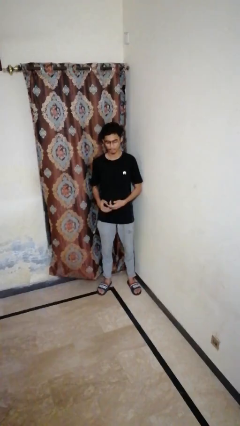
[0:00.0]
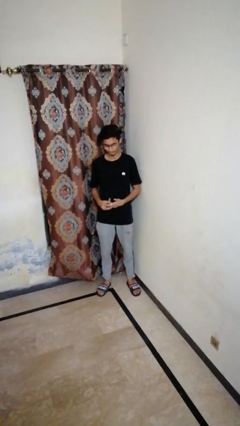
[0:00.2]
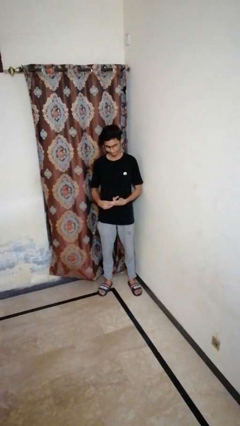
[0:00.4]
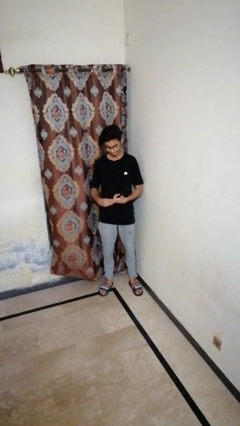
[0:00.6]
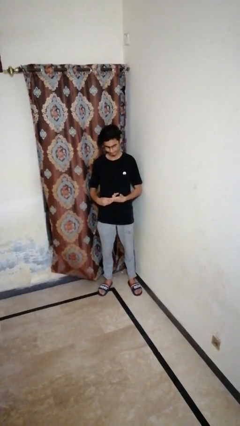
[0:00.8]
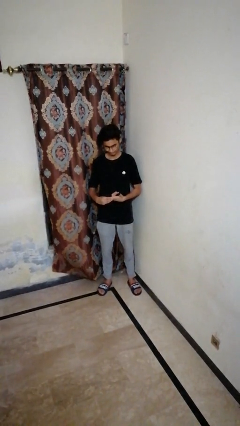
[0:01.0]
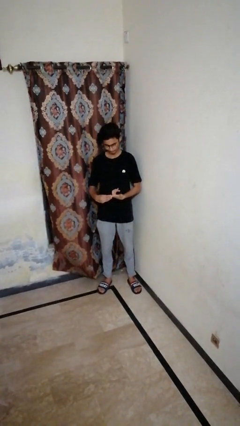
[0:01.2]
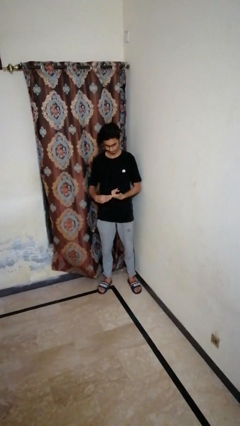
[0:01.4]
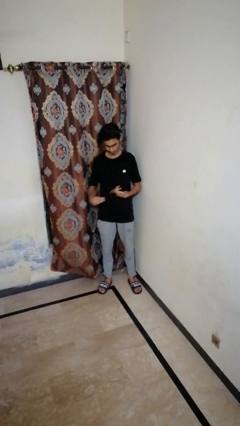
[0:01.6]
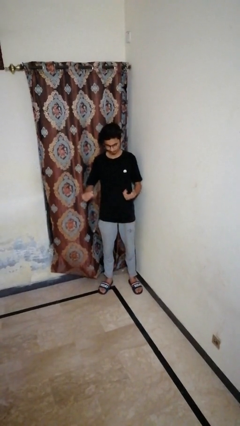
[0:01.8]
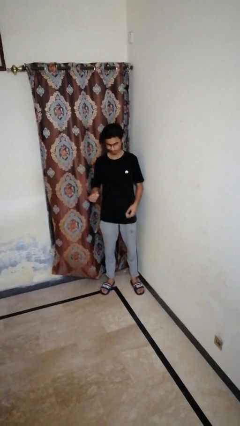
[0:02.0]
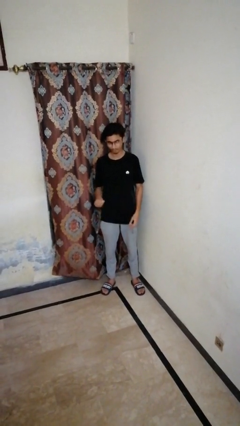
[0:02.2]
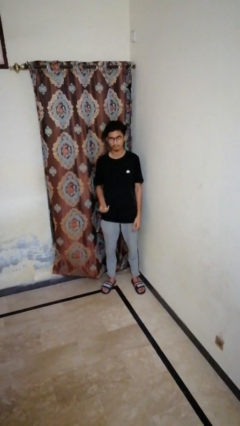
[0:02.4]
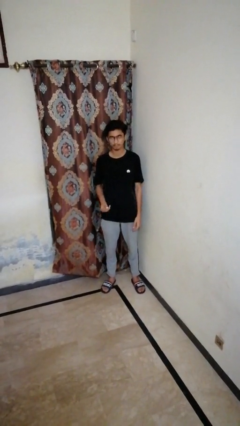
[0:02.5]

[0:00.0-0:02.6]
person takes off ring

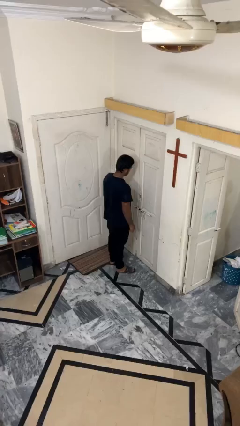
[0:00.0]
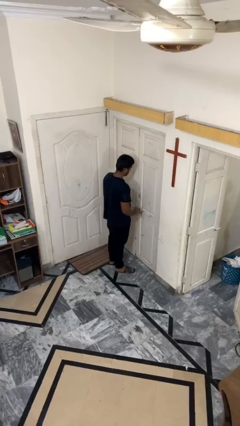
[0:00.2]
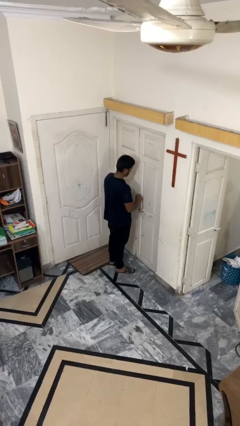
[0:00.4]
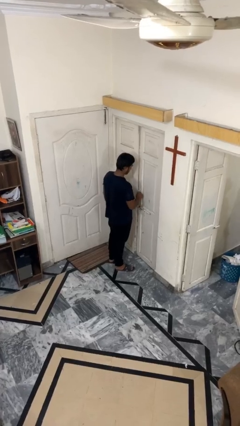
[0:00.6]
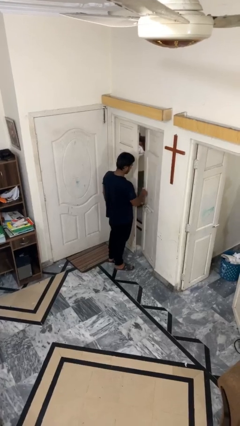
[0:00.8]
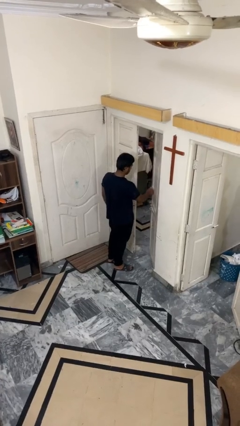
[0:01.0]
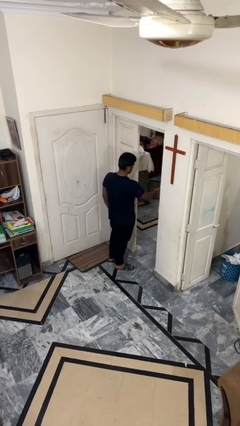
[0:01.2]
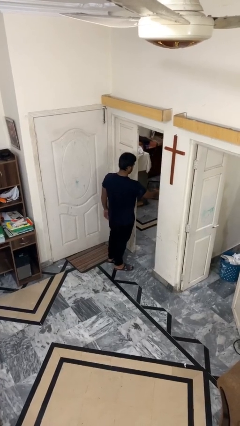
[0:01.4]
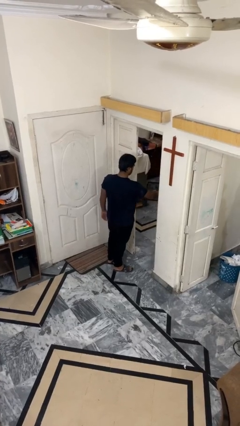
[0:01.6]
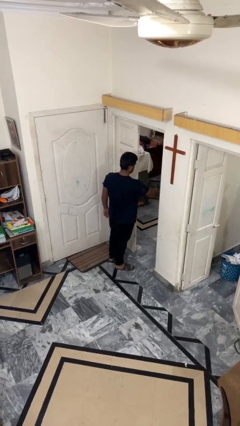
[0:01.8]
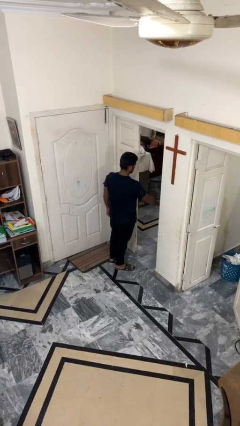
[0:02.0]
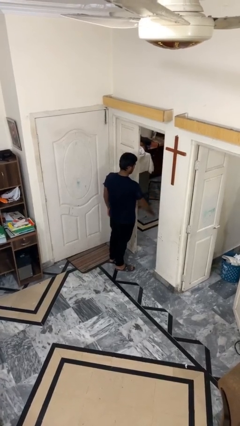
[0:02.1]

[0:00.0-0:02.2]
person opens facility door

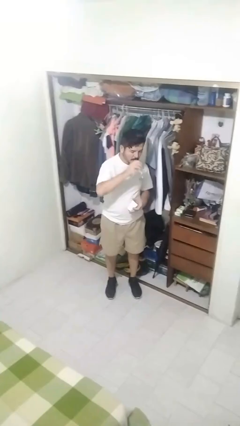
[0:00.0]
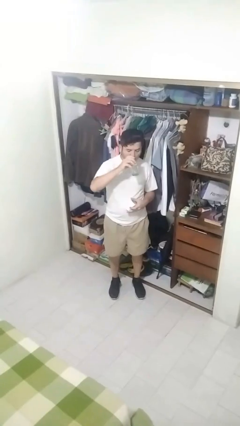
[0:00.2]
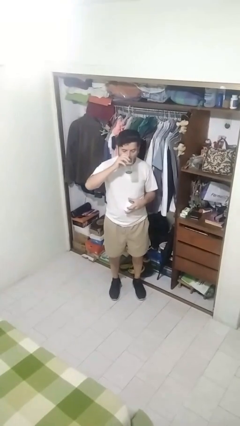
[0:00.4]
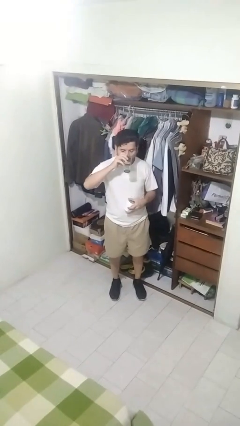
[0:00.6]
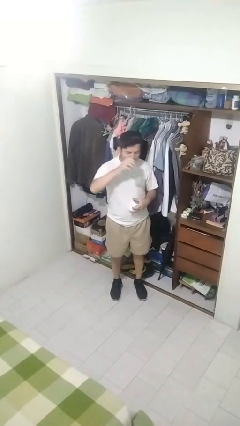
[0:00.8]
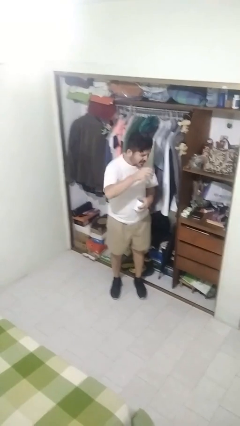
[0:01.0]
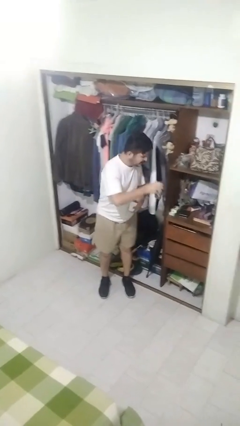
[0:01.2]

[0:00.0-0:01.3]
person drinks from cup

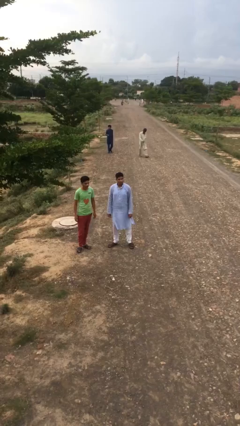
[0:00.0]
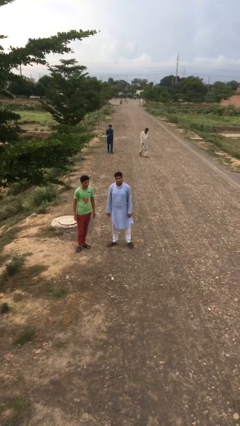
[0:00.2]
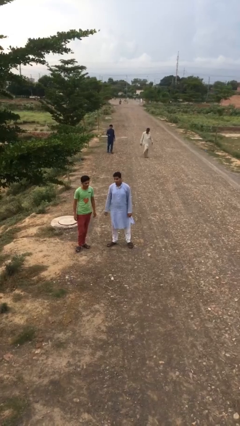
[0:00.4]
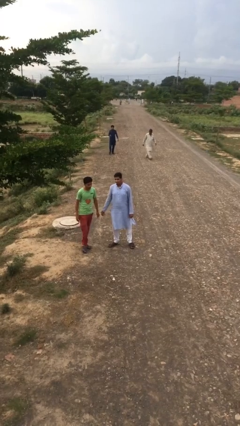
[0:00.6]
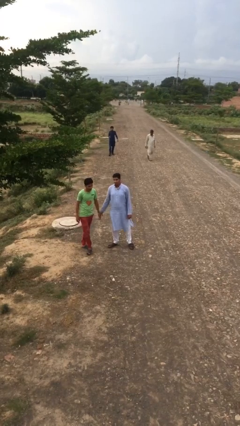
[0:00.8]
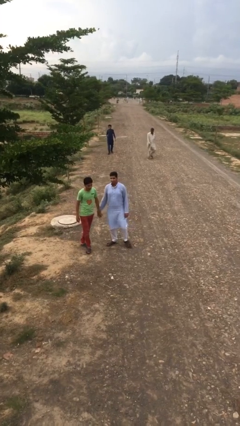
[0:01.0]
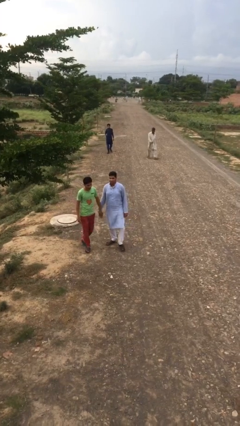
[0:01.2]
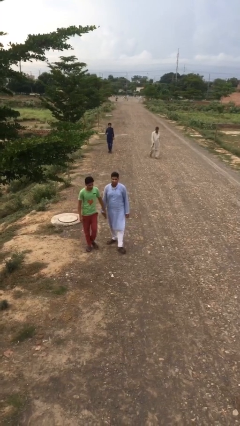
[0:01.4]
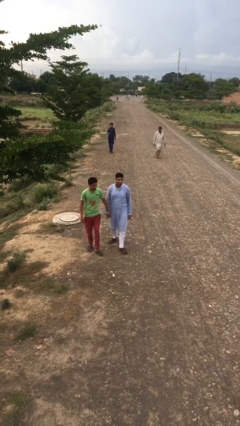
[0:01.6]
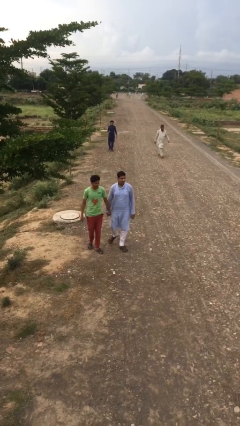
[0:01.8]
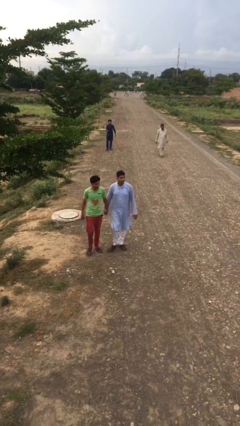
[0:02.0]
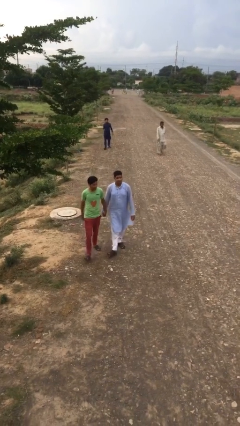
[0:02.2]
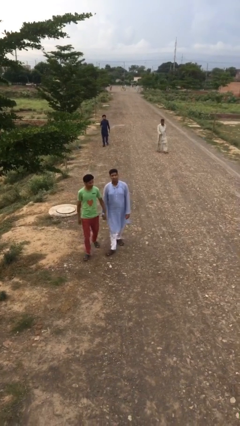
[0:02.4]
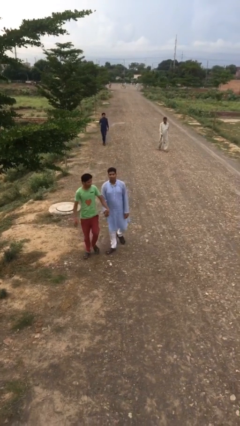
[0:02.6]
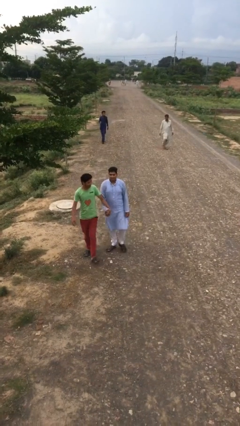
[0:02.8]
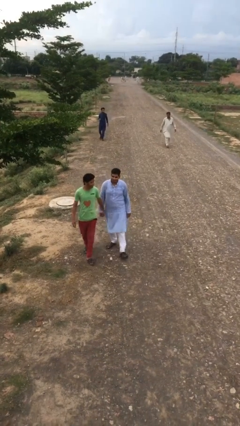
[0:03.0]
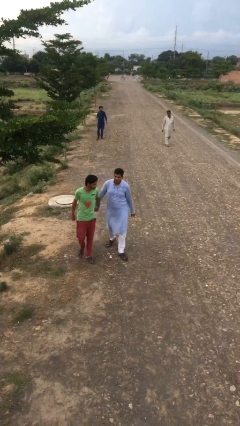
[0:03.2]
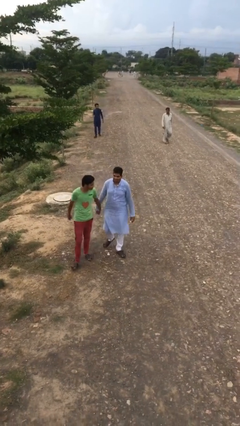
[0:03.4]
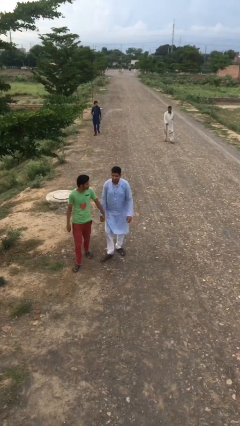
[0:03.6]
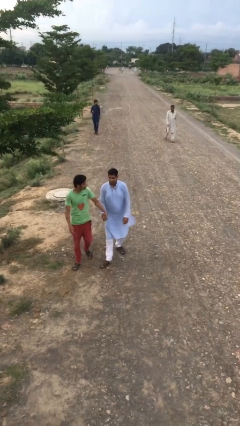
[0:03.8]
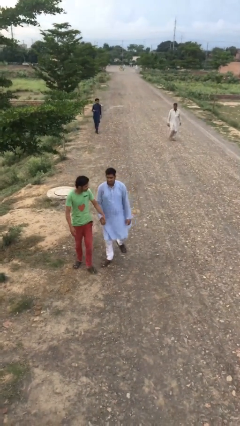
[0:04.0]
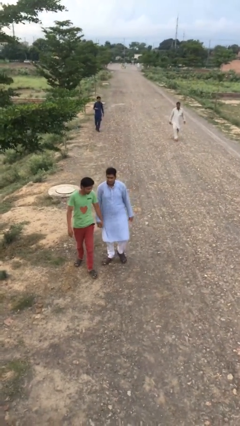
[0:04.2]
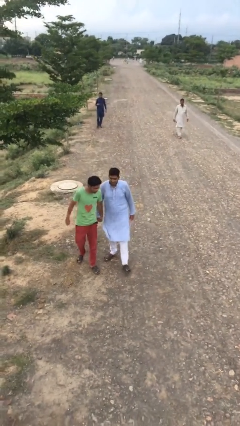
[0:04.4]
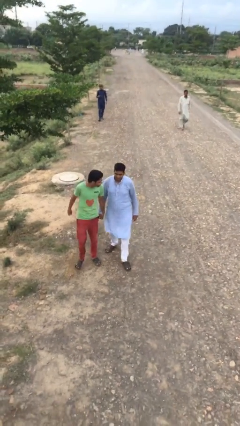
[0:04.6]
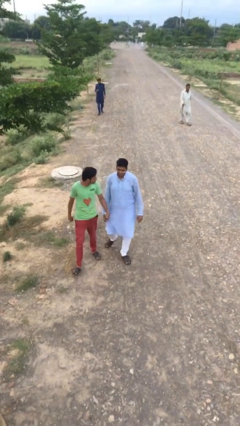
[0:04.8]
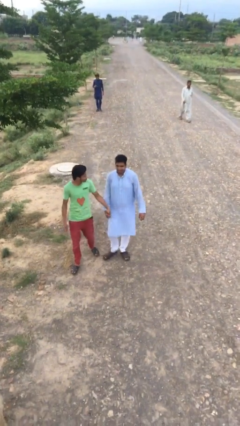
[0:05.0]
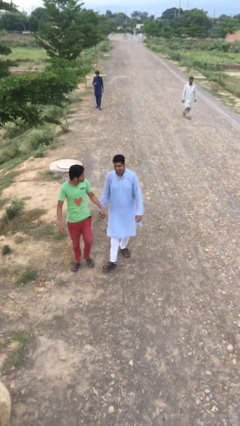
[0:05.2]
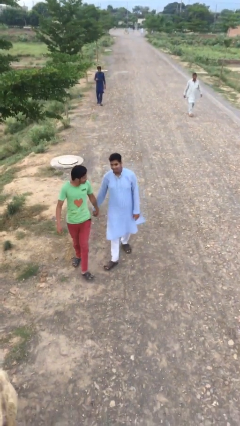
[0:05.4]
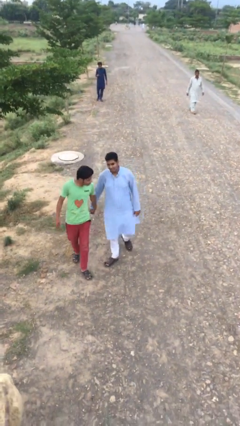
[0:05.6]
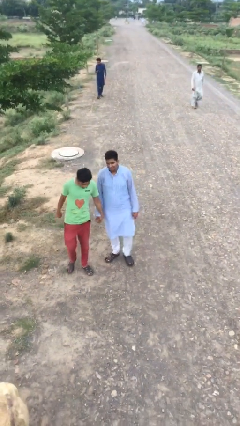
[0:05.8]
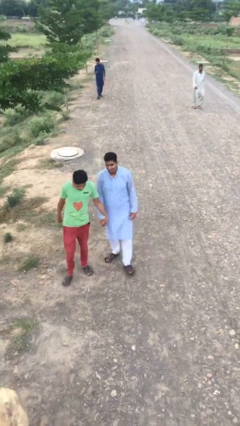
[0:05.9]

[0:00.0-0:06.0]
person holds hand

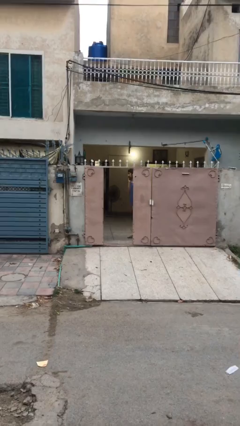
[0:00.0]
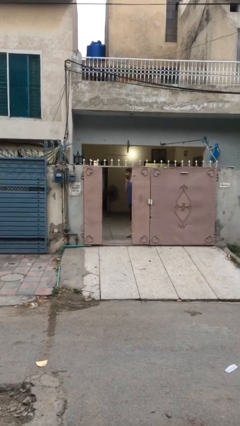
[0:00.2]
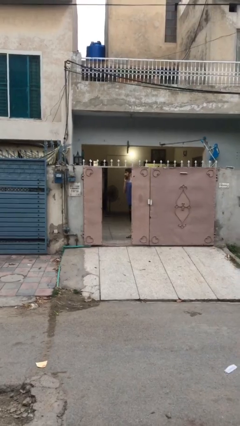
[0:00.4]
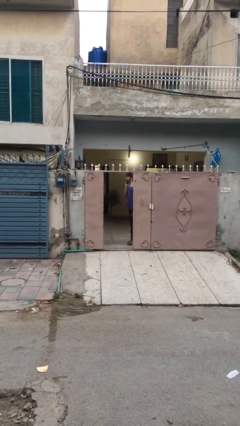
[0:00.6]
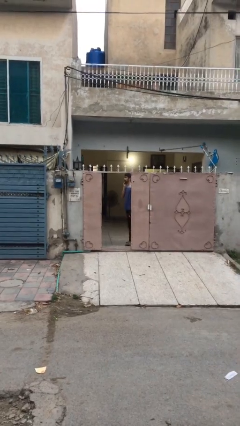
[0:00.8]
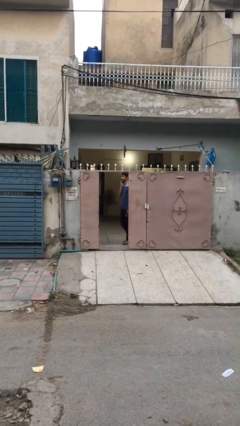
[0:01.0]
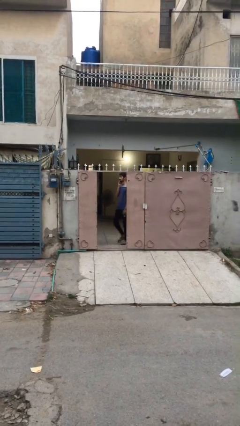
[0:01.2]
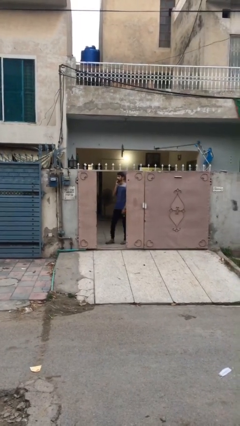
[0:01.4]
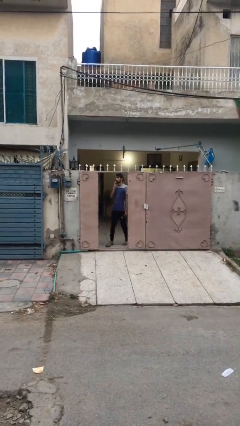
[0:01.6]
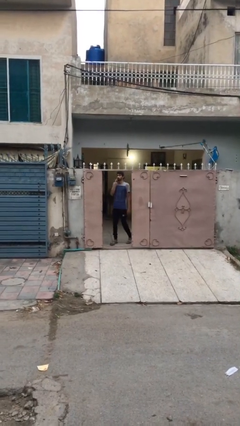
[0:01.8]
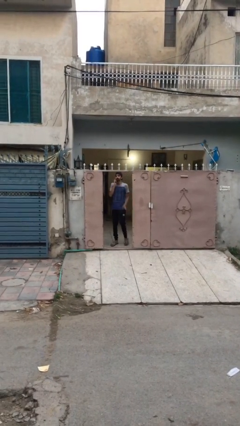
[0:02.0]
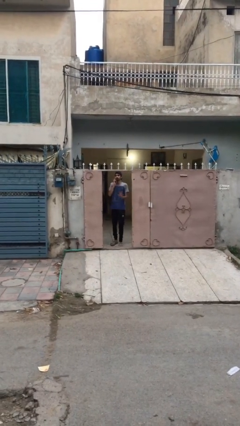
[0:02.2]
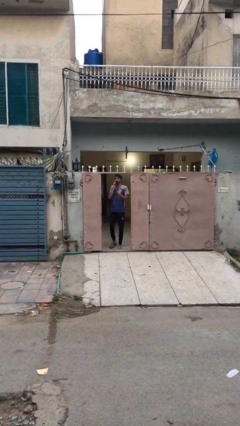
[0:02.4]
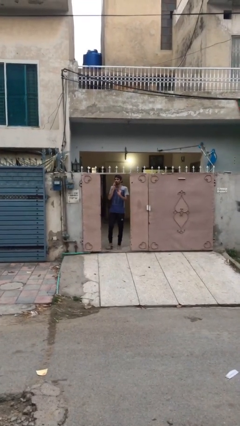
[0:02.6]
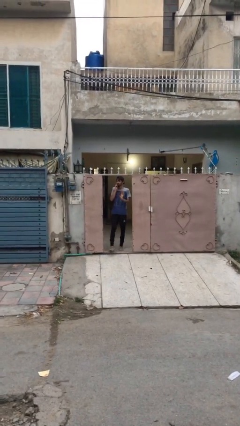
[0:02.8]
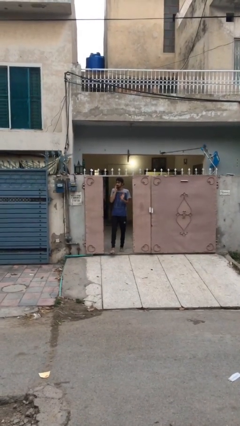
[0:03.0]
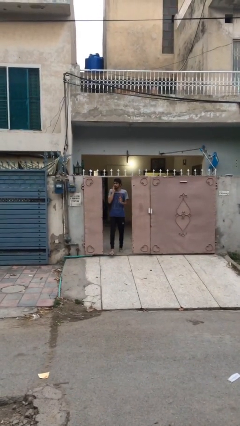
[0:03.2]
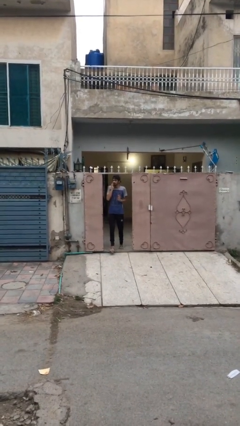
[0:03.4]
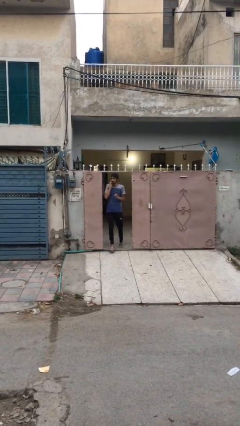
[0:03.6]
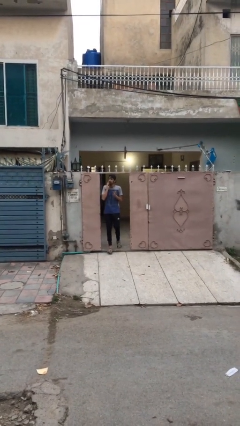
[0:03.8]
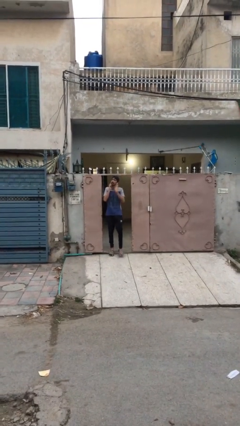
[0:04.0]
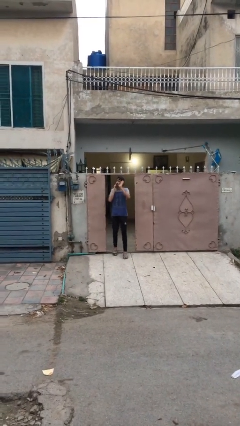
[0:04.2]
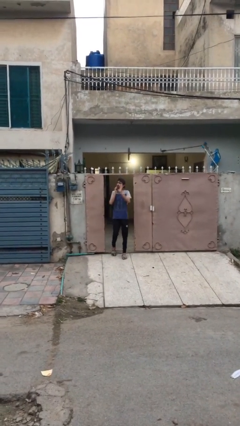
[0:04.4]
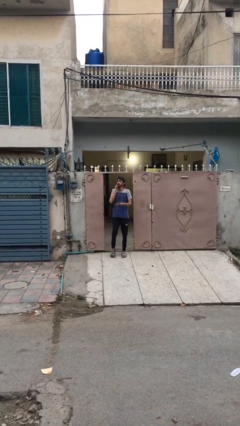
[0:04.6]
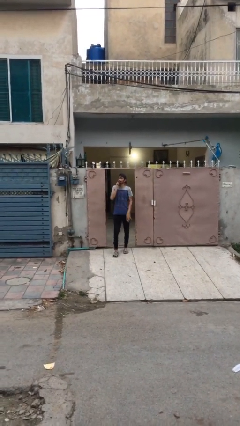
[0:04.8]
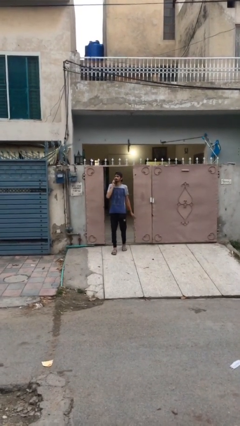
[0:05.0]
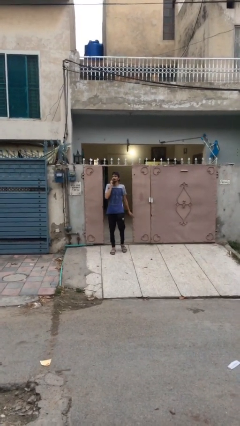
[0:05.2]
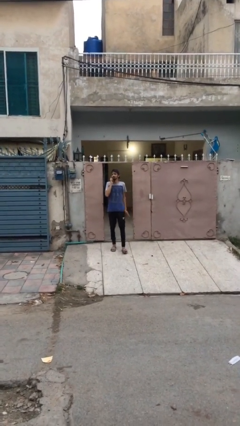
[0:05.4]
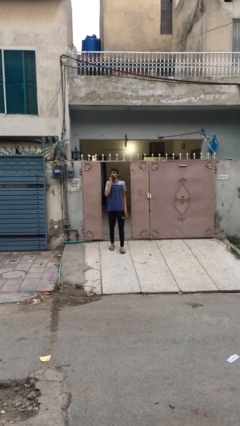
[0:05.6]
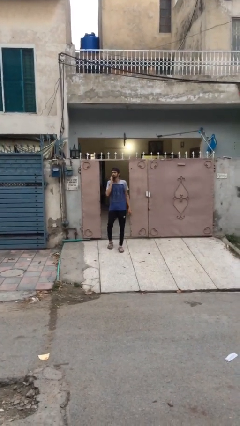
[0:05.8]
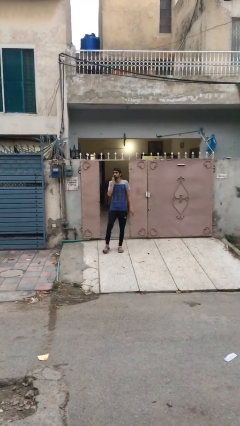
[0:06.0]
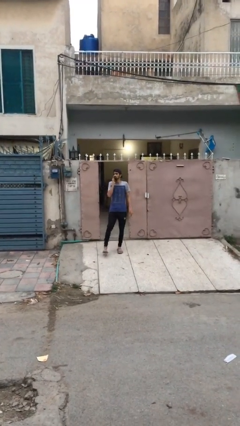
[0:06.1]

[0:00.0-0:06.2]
person enters scene through structure
